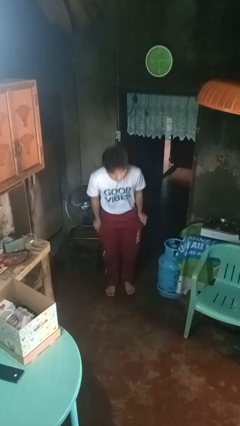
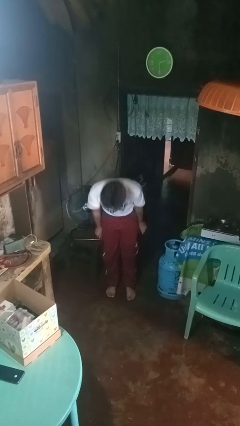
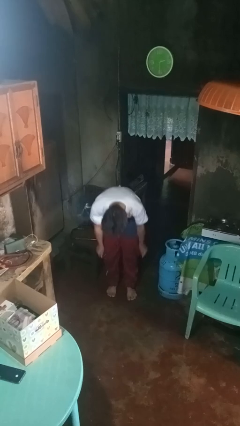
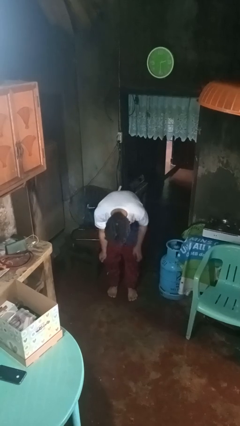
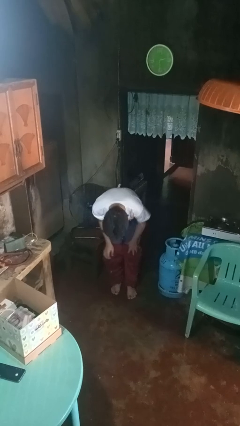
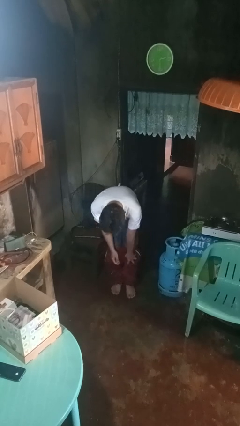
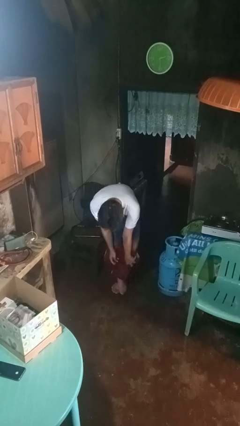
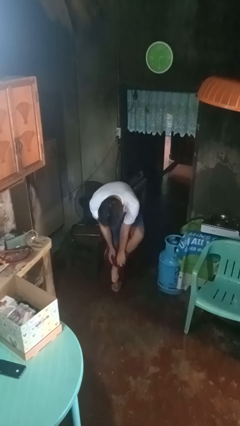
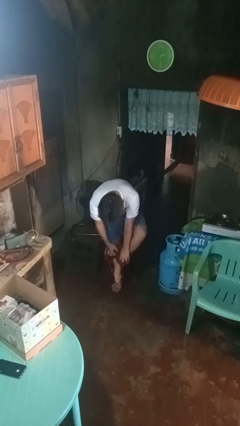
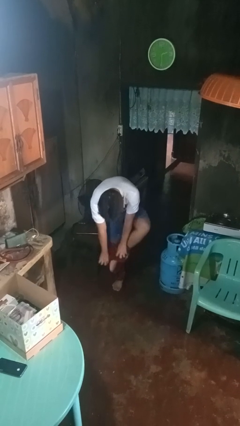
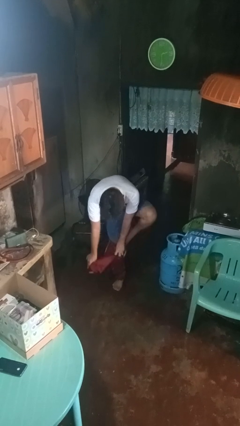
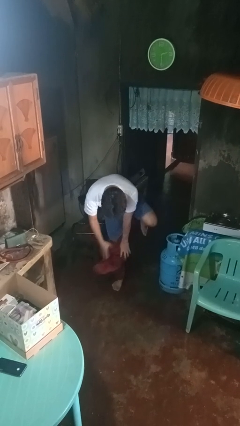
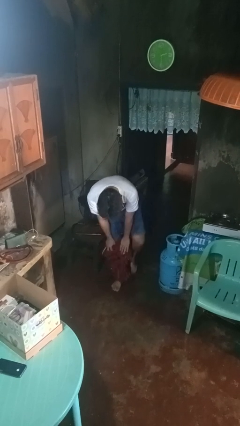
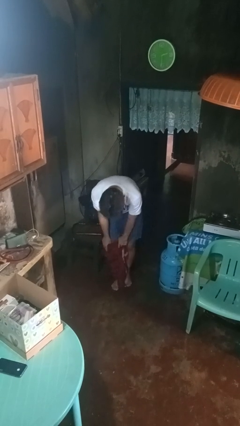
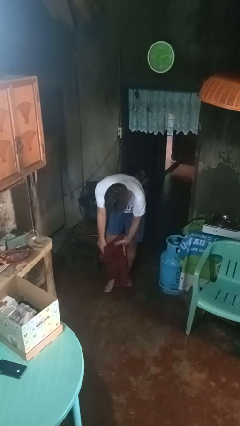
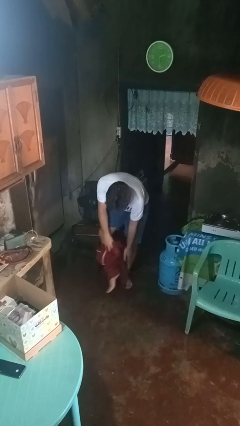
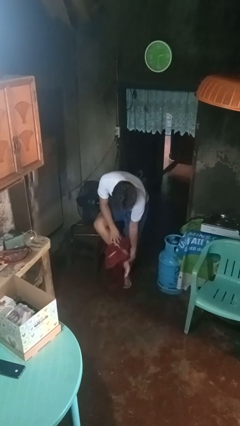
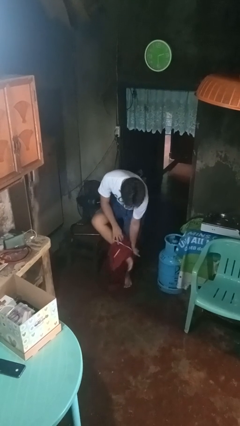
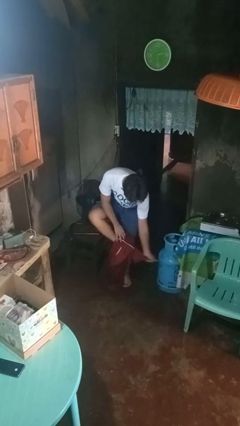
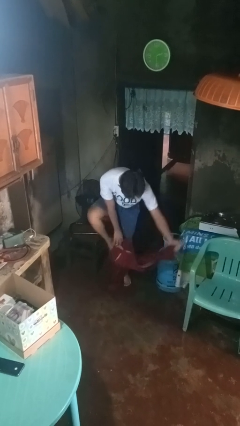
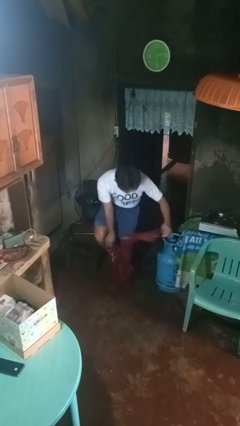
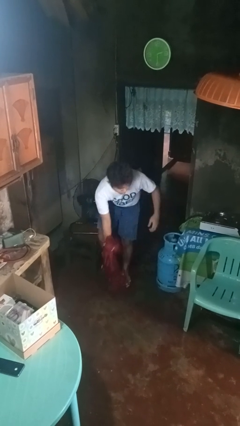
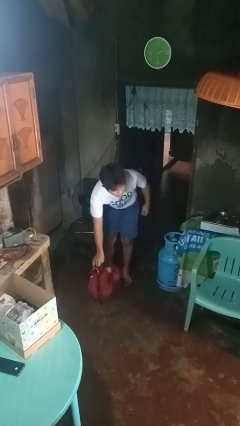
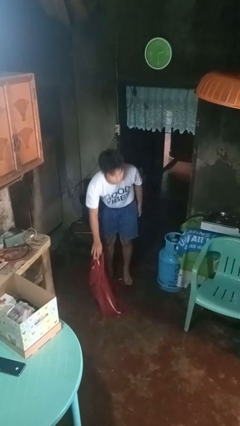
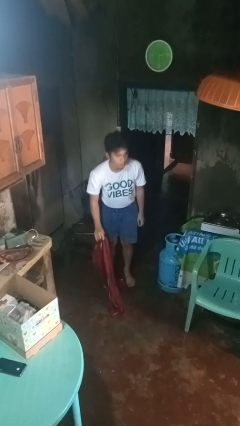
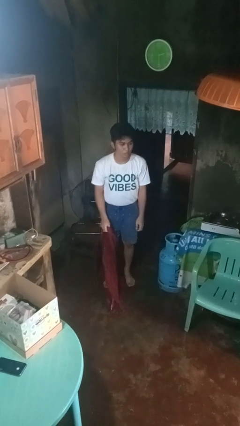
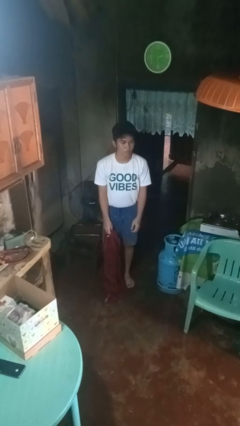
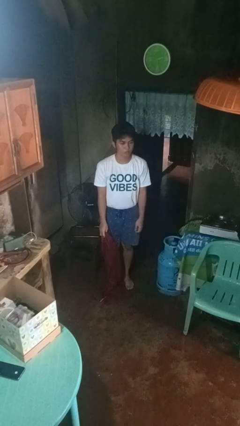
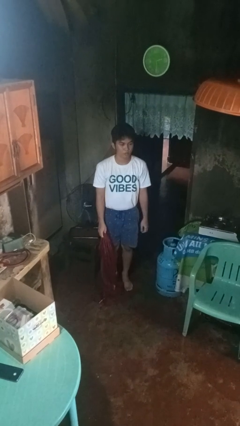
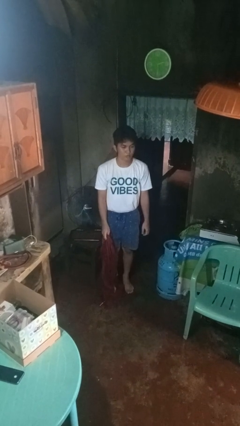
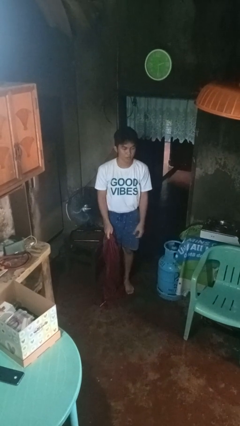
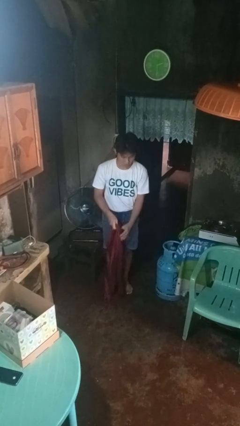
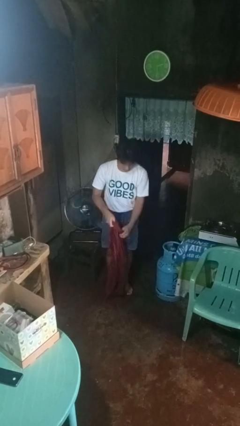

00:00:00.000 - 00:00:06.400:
person takes off pants

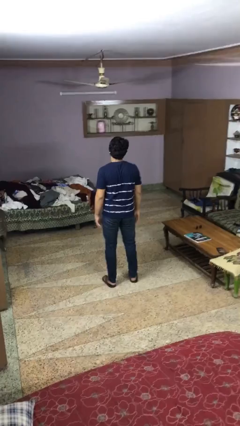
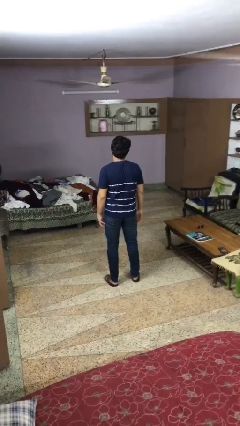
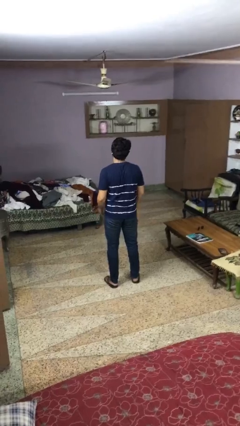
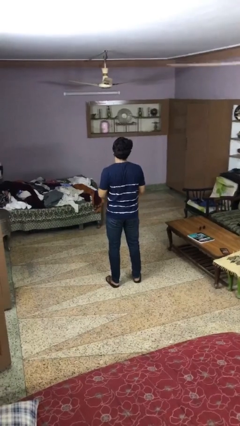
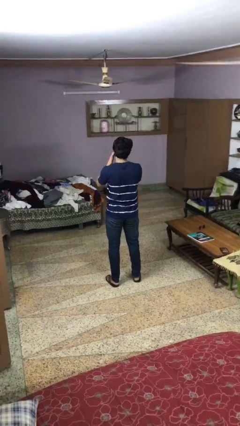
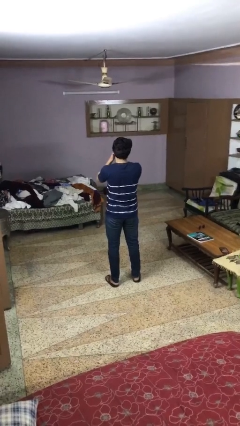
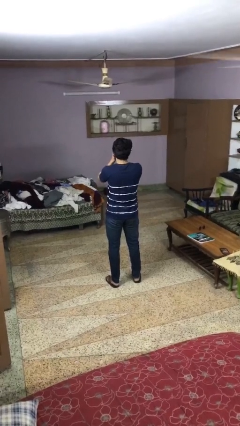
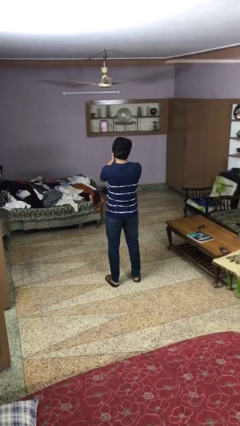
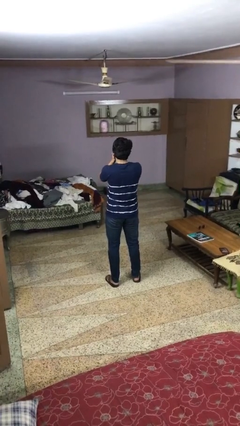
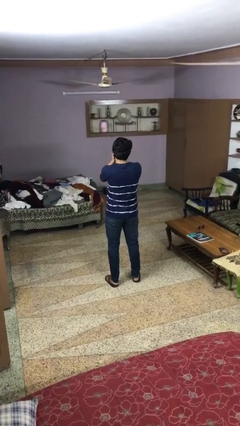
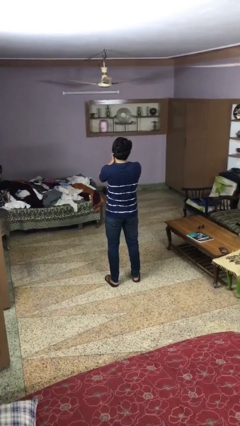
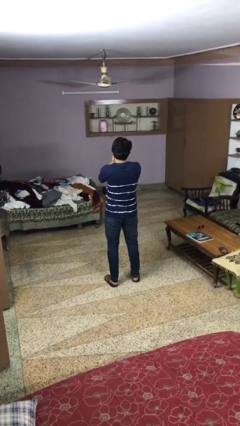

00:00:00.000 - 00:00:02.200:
person covers face with hands

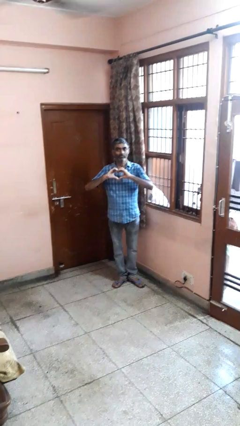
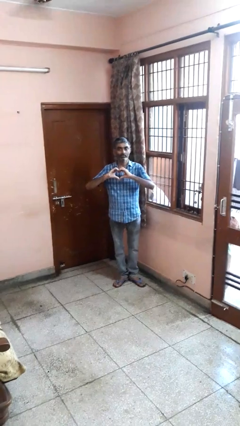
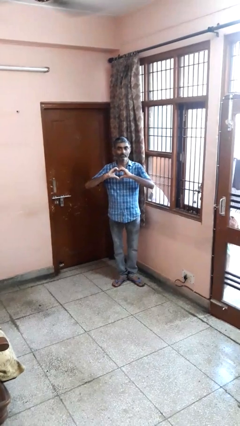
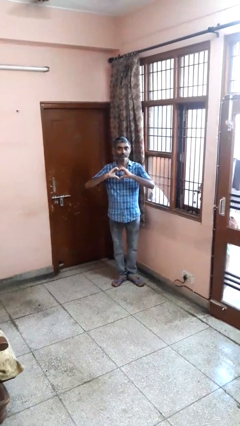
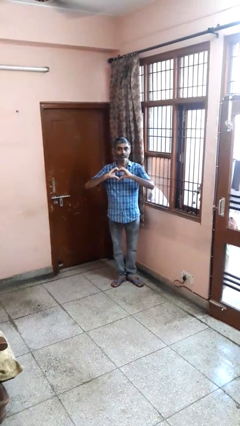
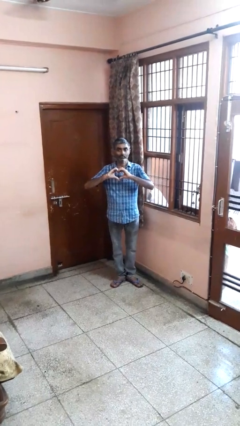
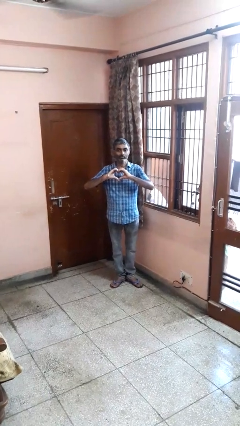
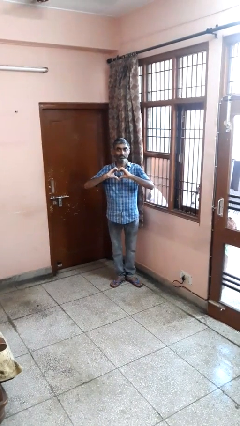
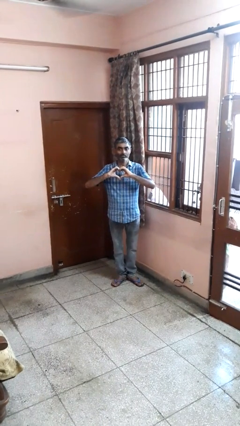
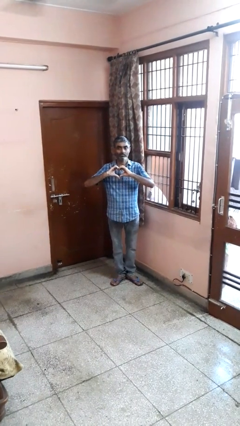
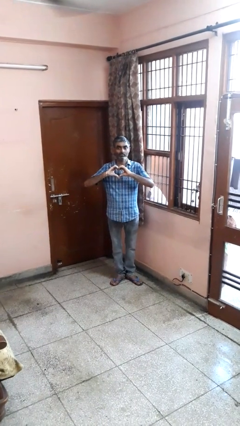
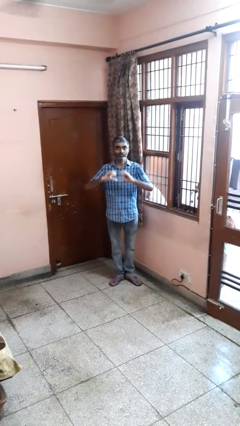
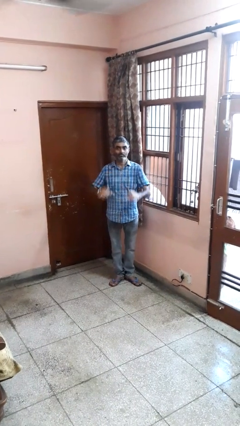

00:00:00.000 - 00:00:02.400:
person gestures heart

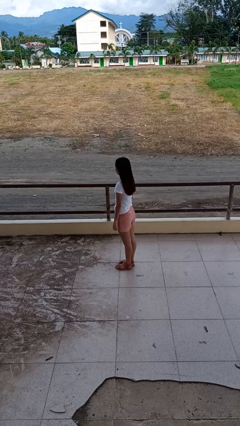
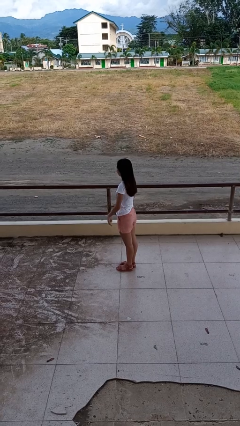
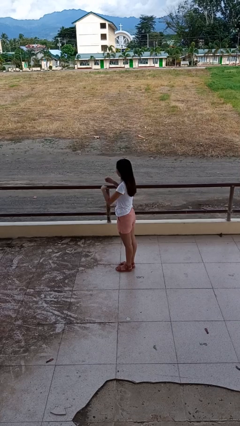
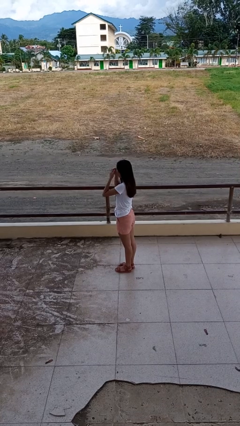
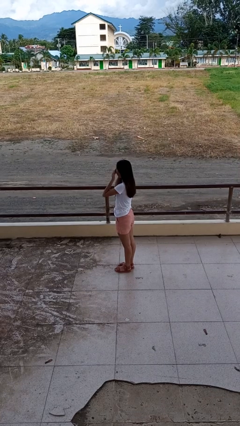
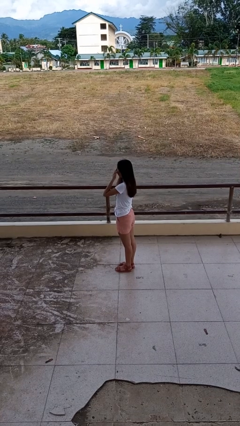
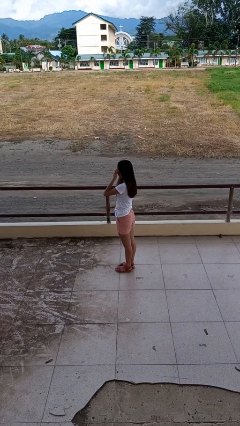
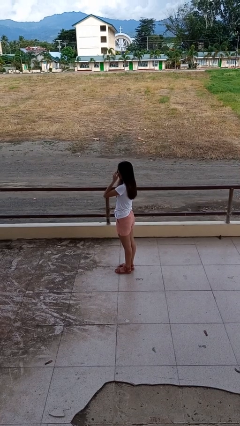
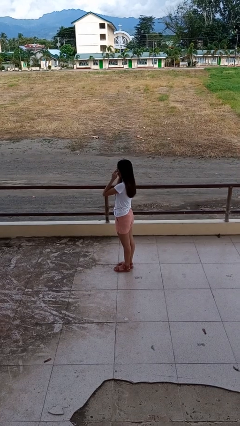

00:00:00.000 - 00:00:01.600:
person rubs eyes

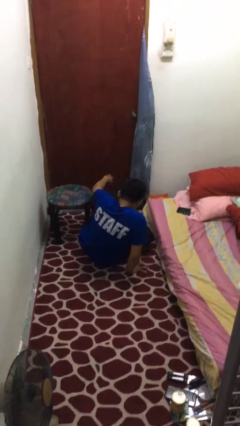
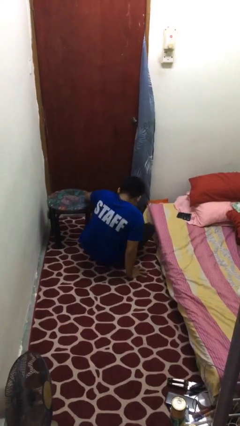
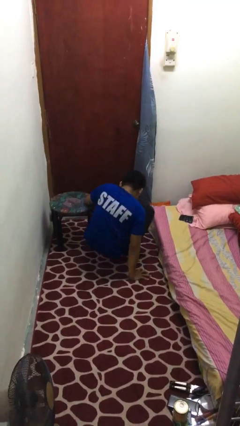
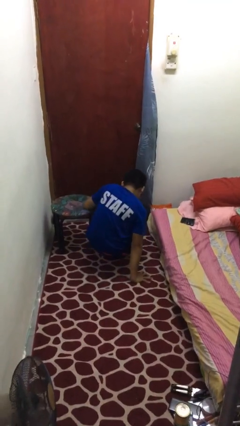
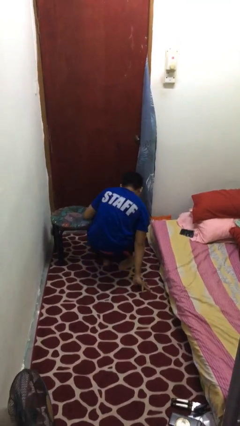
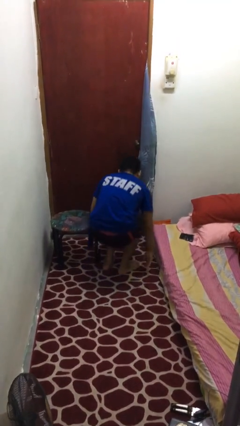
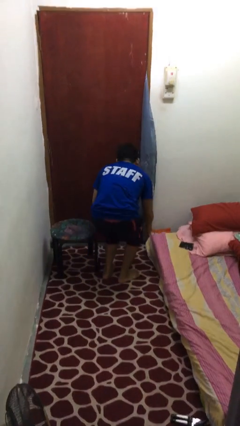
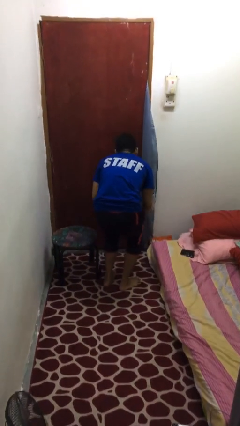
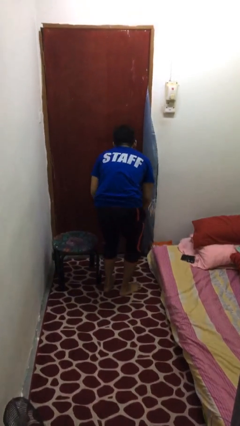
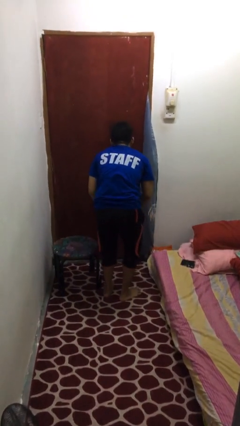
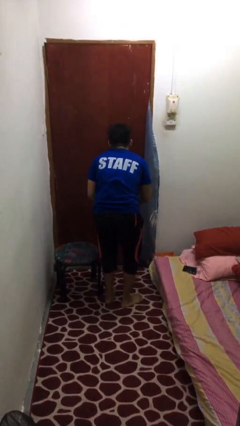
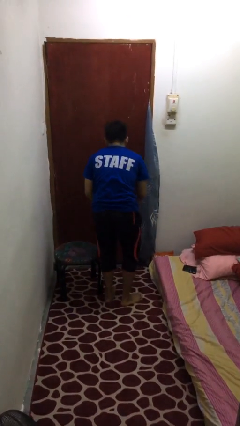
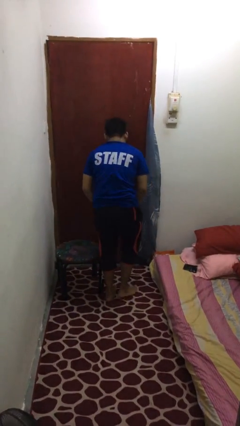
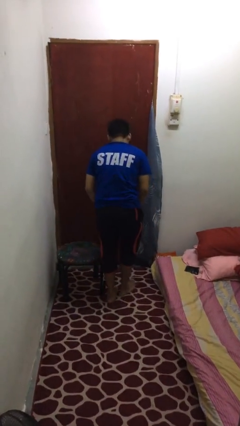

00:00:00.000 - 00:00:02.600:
person stands up from floor

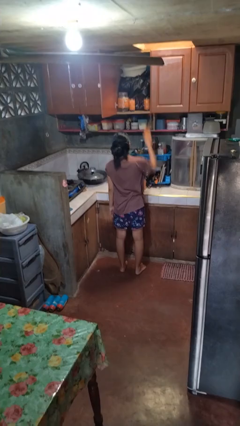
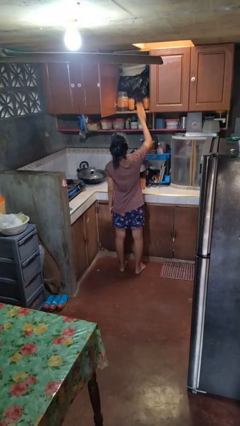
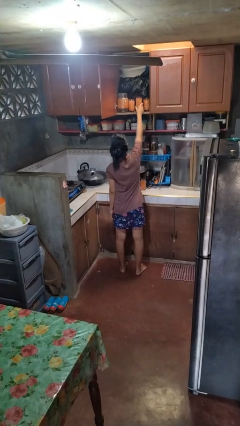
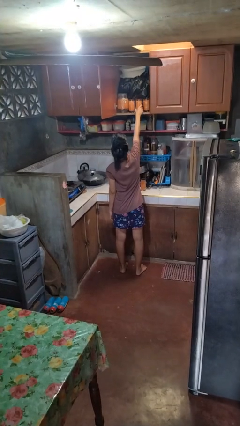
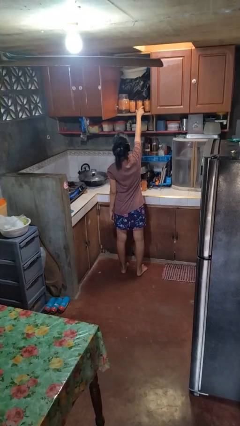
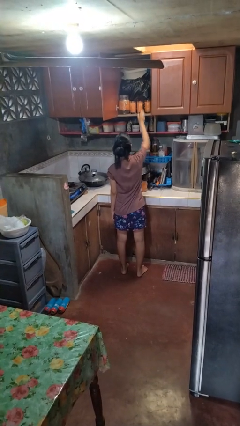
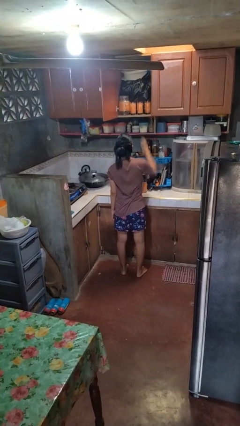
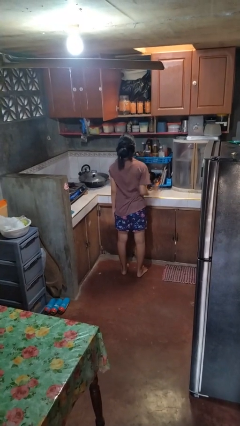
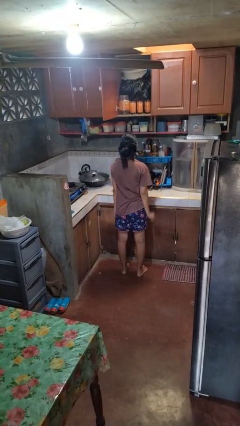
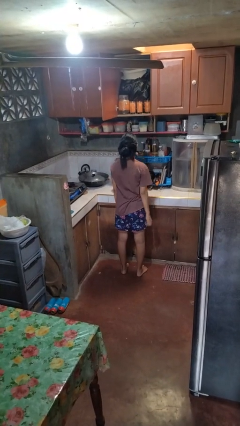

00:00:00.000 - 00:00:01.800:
person puts object in cabinet

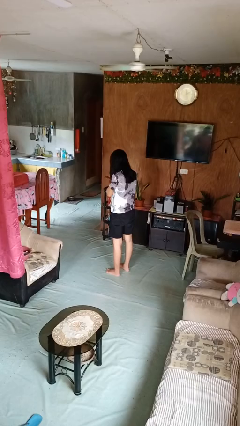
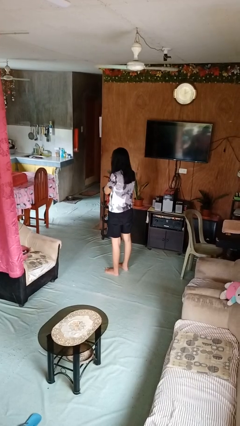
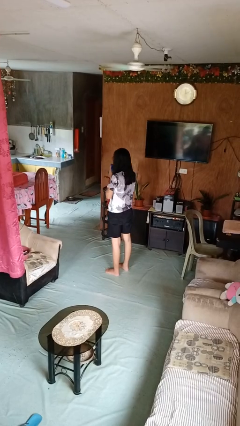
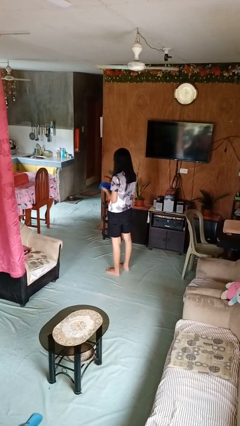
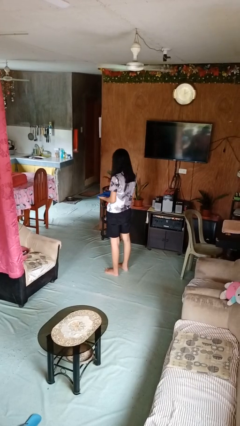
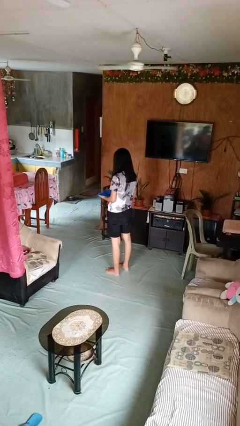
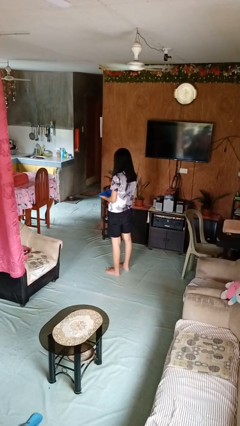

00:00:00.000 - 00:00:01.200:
person blows nose
